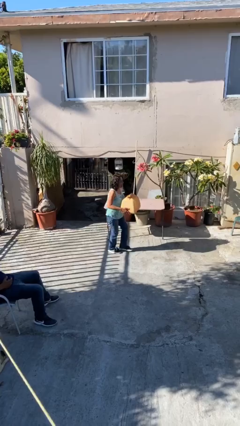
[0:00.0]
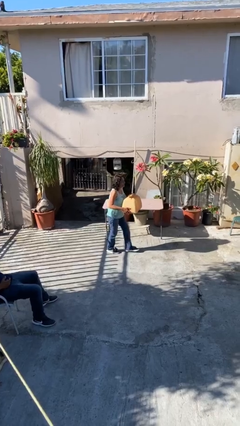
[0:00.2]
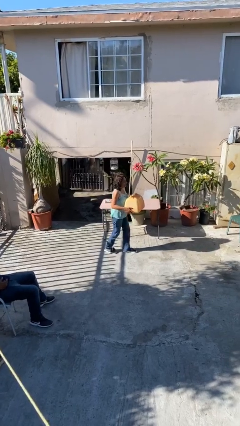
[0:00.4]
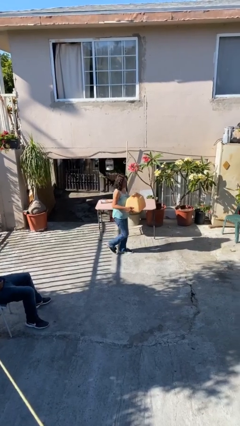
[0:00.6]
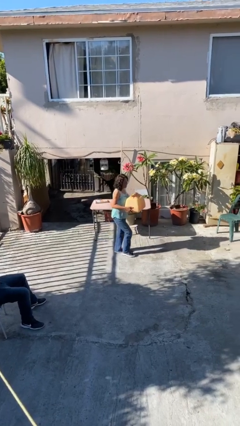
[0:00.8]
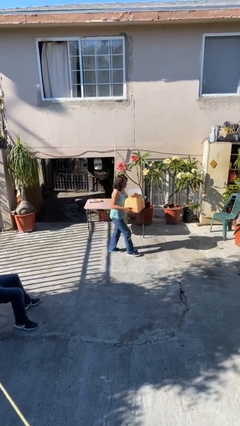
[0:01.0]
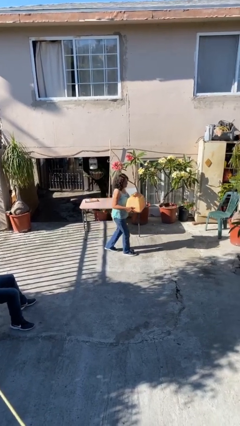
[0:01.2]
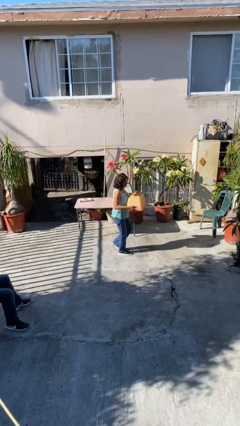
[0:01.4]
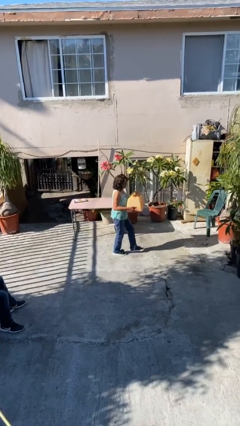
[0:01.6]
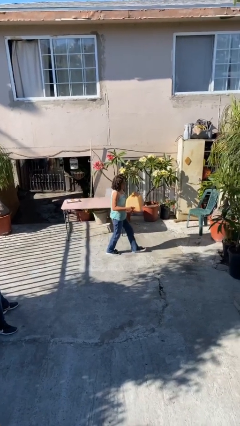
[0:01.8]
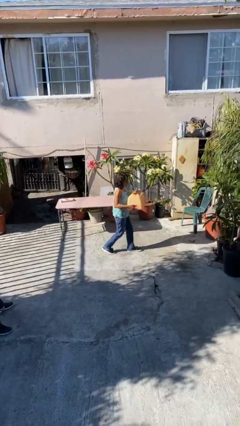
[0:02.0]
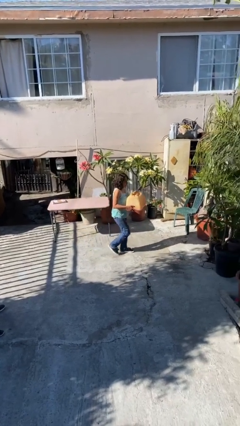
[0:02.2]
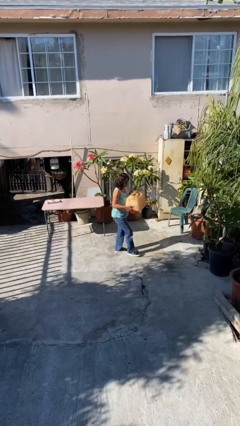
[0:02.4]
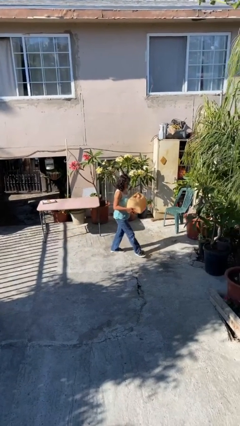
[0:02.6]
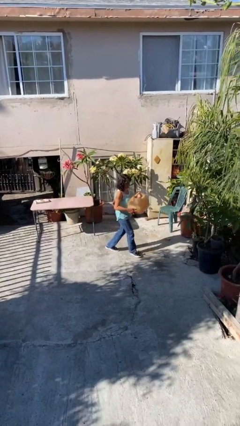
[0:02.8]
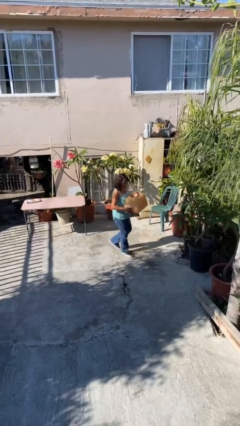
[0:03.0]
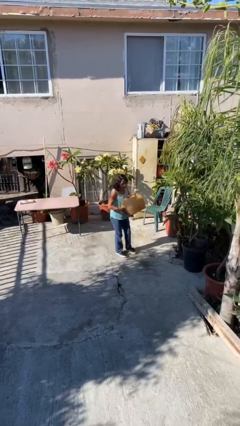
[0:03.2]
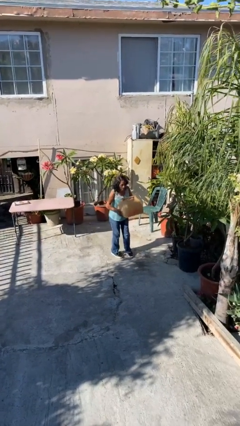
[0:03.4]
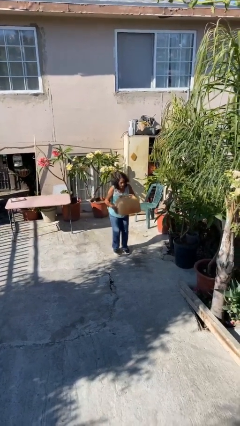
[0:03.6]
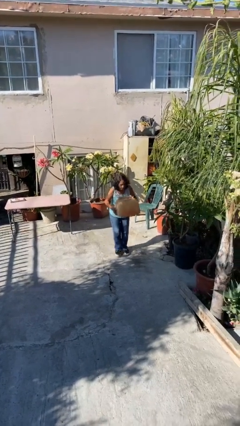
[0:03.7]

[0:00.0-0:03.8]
person carries heavy object

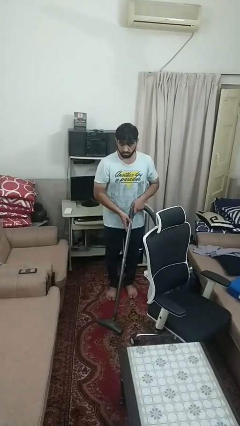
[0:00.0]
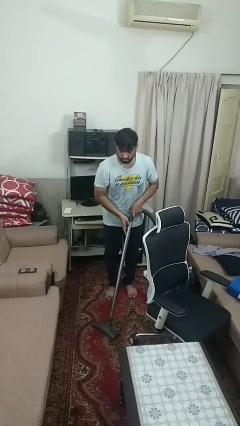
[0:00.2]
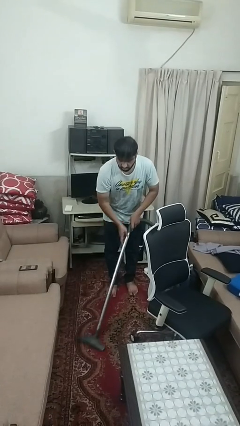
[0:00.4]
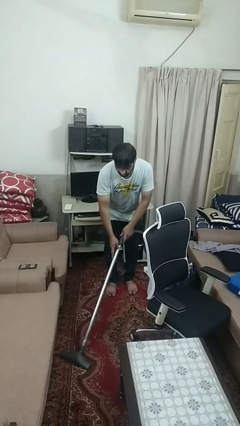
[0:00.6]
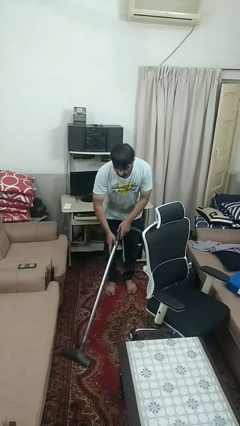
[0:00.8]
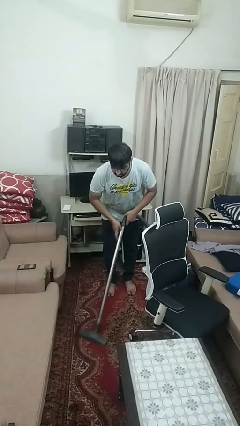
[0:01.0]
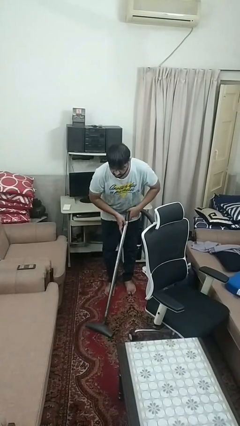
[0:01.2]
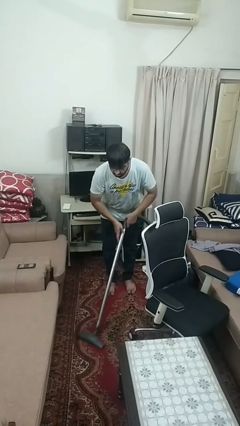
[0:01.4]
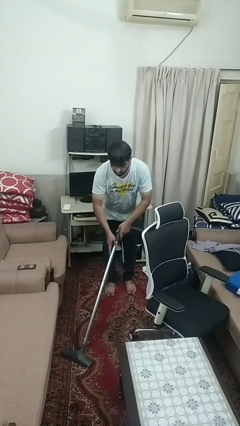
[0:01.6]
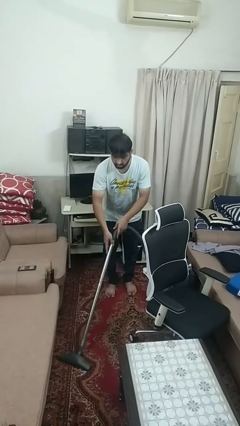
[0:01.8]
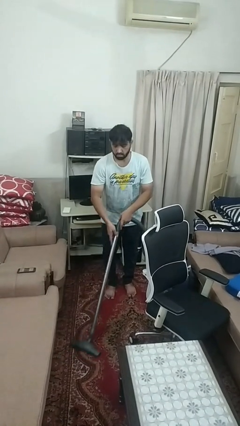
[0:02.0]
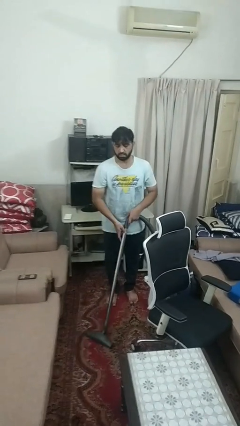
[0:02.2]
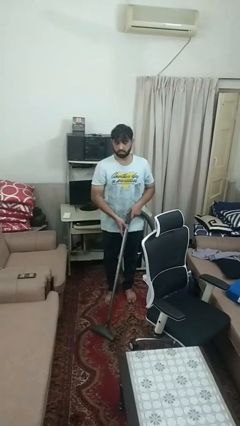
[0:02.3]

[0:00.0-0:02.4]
person vacuums carpet

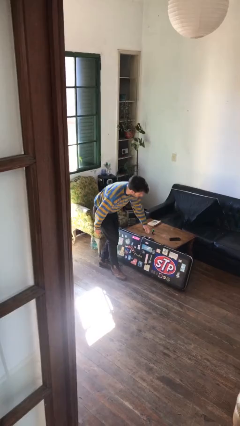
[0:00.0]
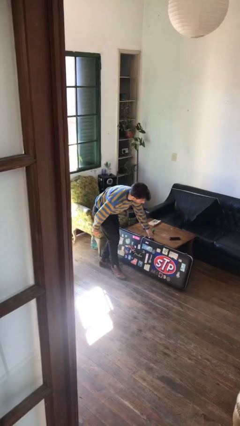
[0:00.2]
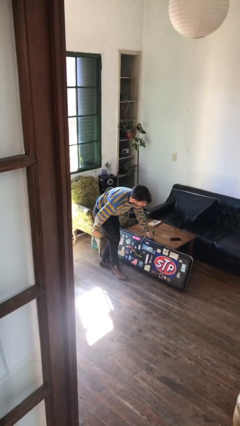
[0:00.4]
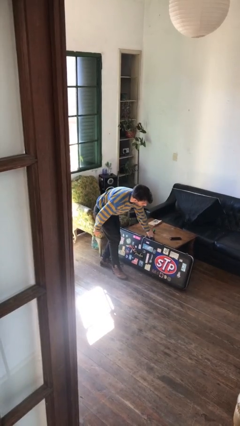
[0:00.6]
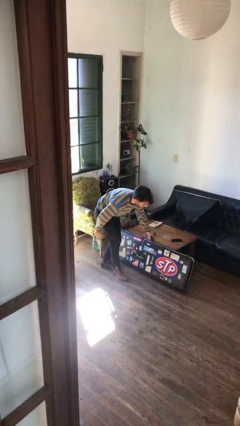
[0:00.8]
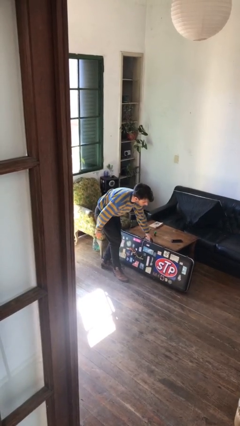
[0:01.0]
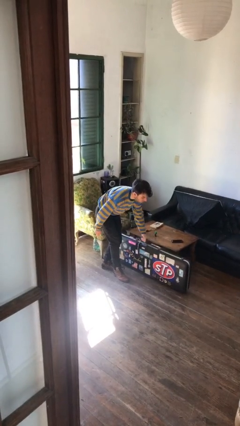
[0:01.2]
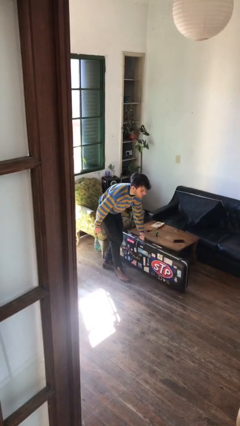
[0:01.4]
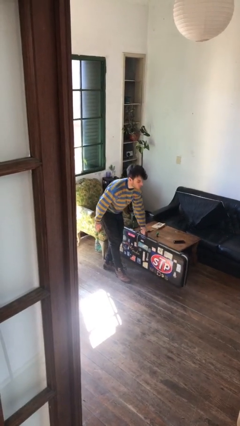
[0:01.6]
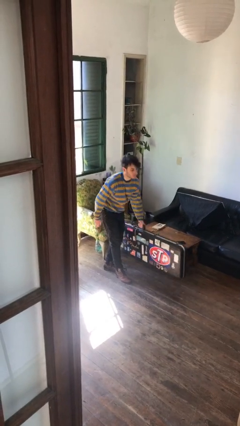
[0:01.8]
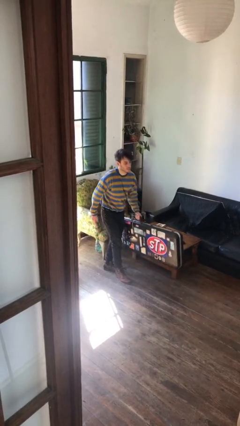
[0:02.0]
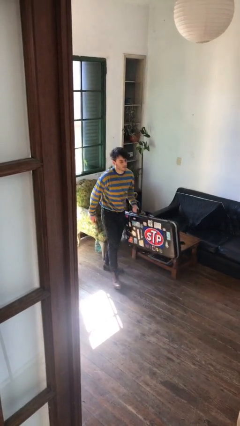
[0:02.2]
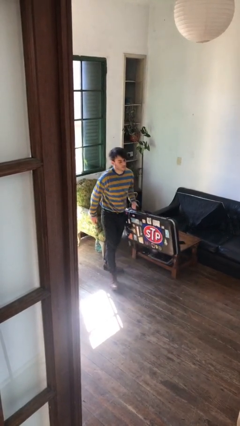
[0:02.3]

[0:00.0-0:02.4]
person picks up object from floor

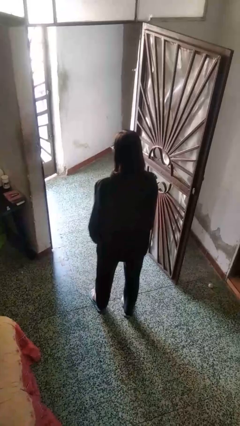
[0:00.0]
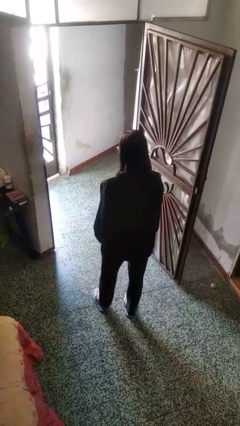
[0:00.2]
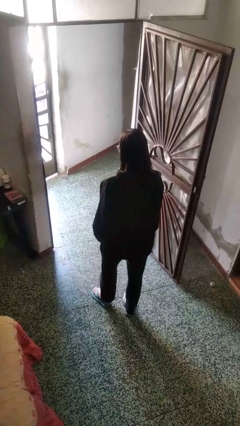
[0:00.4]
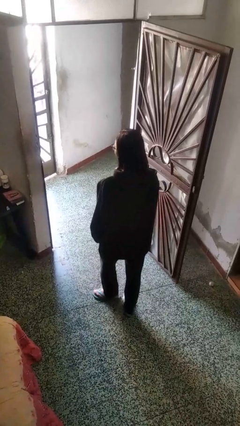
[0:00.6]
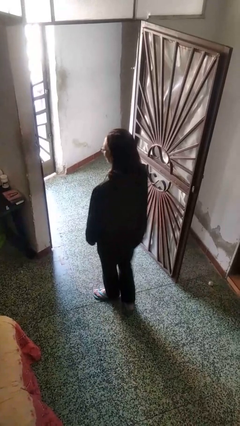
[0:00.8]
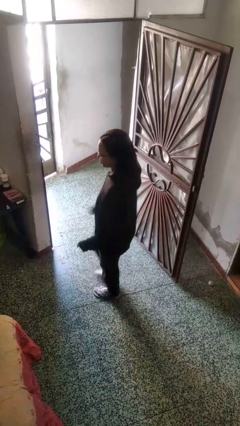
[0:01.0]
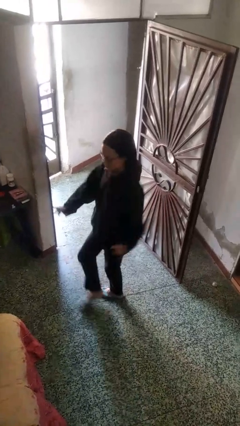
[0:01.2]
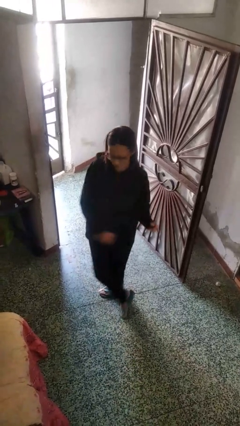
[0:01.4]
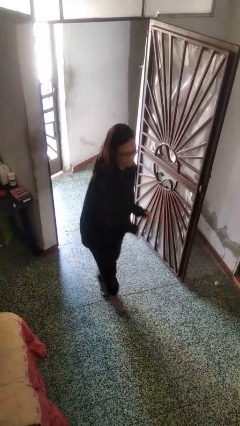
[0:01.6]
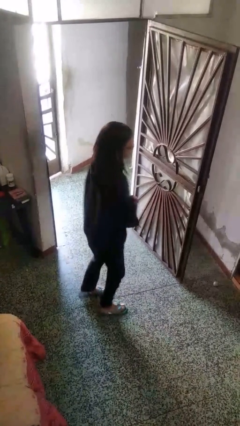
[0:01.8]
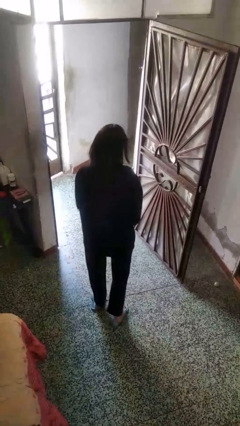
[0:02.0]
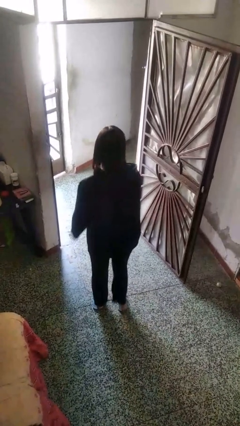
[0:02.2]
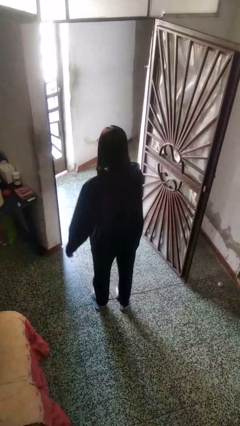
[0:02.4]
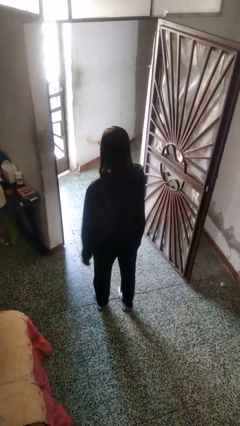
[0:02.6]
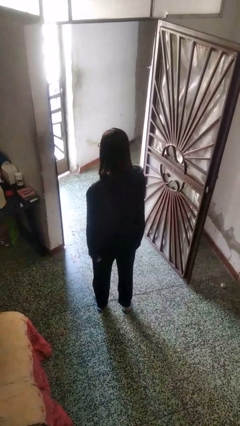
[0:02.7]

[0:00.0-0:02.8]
person twirls

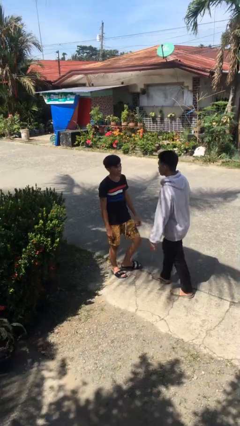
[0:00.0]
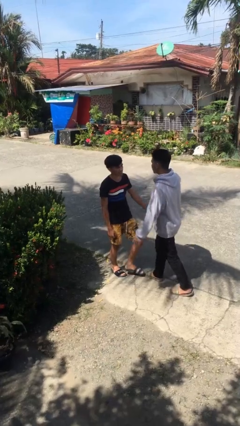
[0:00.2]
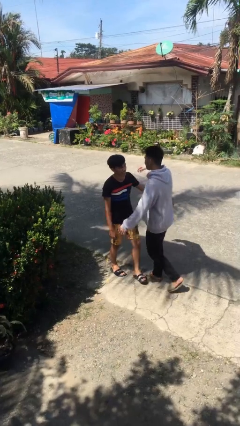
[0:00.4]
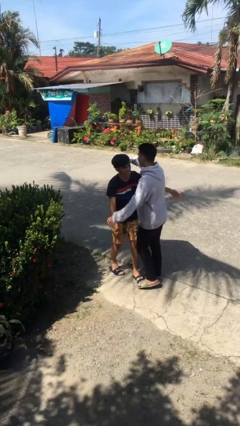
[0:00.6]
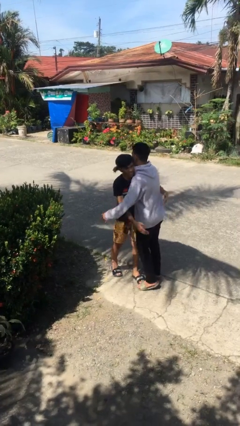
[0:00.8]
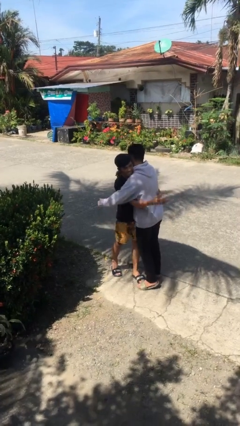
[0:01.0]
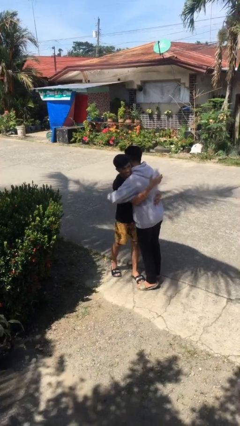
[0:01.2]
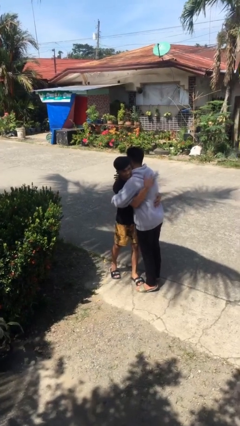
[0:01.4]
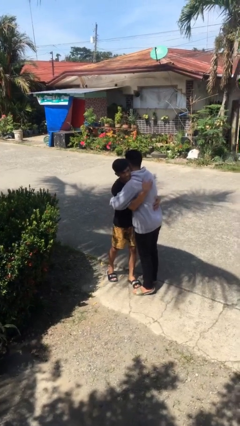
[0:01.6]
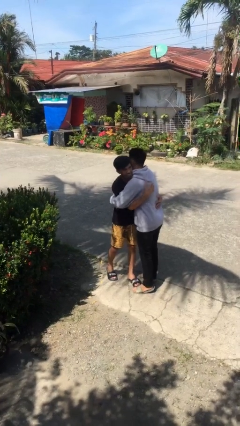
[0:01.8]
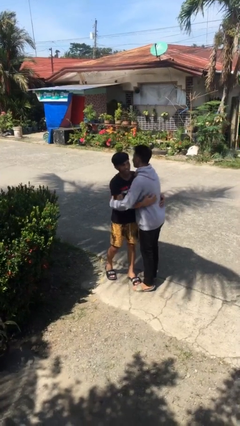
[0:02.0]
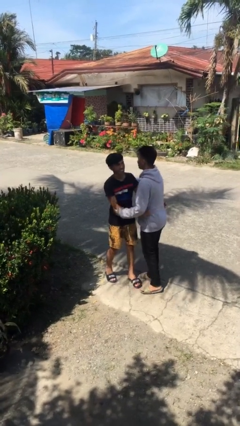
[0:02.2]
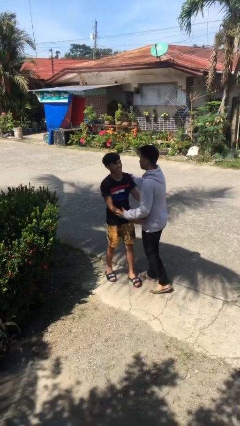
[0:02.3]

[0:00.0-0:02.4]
person embraces person

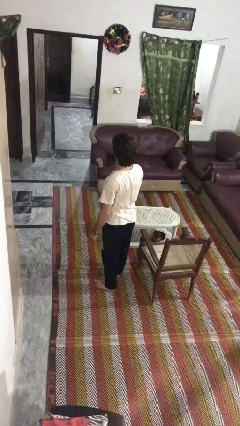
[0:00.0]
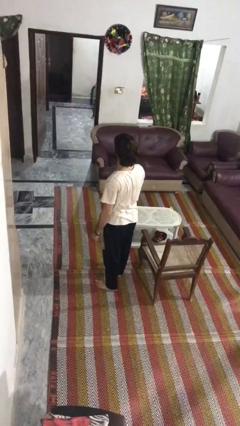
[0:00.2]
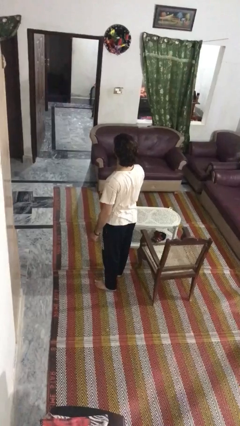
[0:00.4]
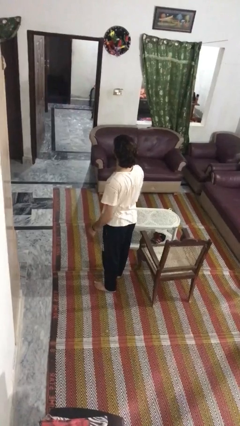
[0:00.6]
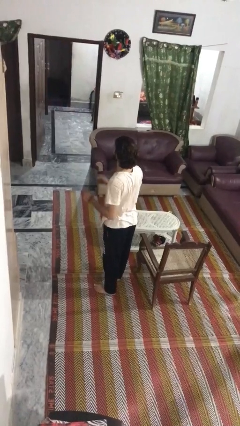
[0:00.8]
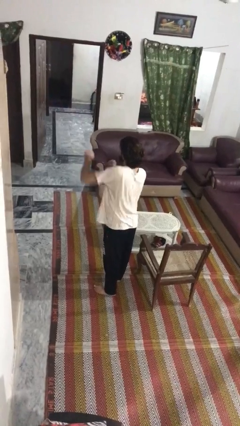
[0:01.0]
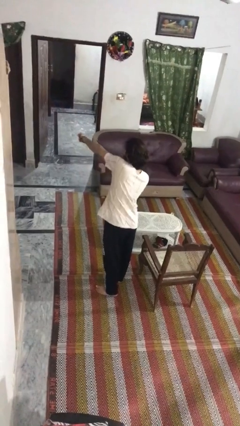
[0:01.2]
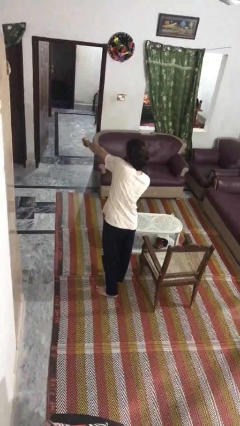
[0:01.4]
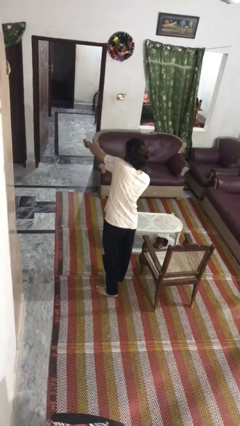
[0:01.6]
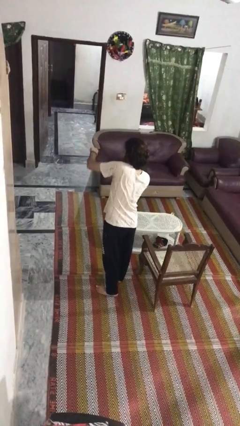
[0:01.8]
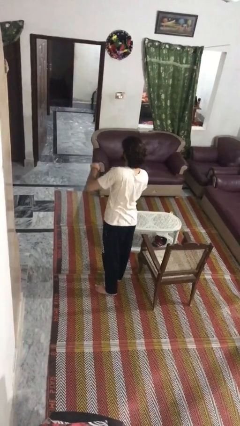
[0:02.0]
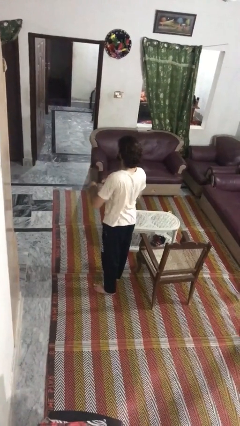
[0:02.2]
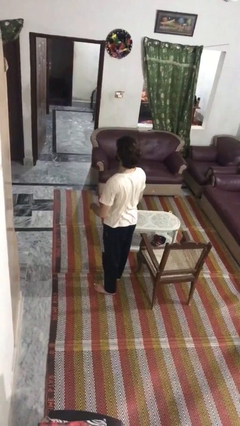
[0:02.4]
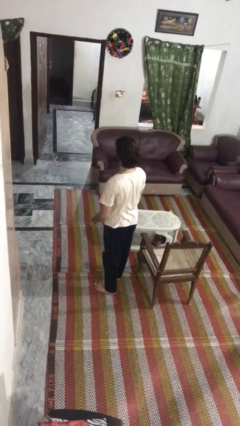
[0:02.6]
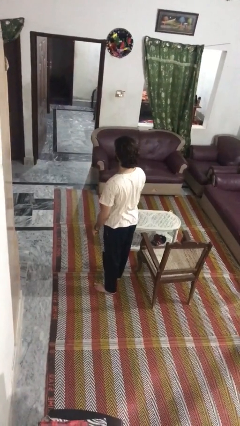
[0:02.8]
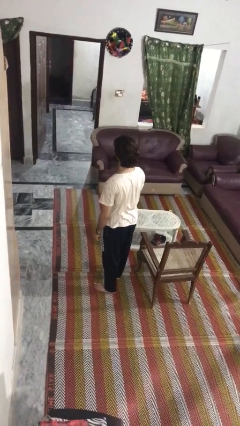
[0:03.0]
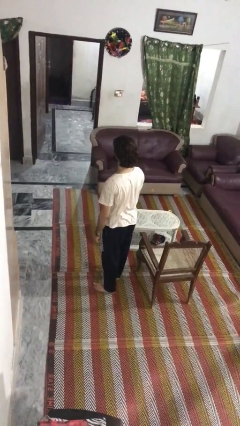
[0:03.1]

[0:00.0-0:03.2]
person punches
